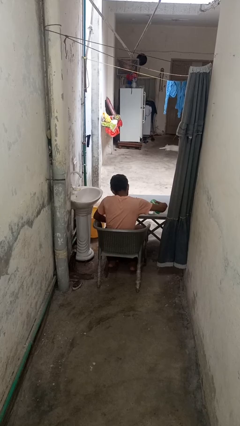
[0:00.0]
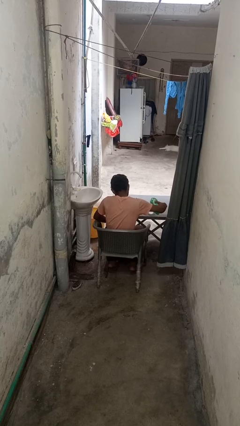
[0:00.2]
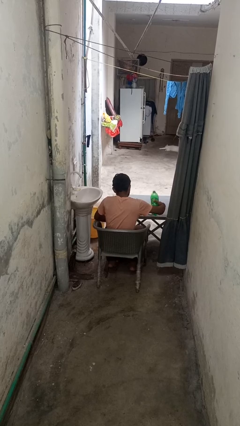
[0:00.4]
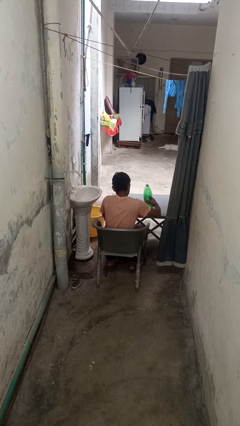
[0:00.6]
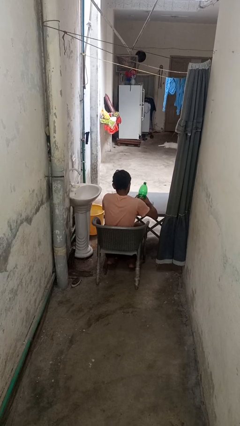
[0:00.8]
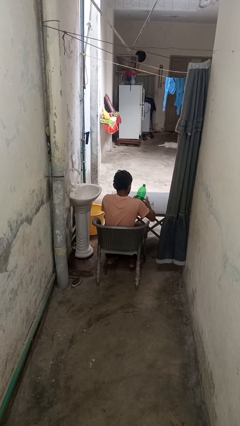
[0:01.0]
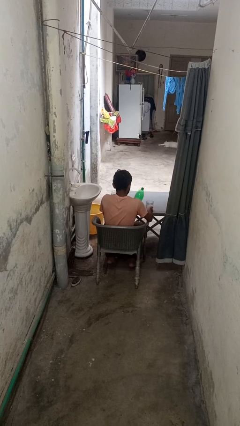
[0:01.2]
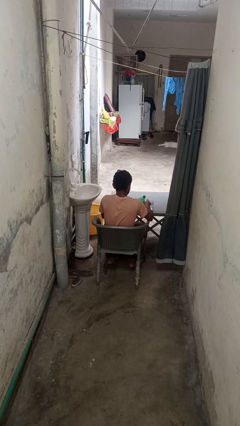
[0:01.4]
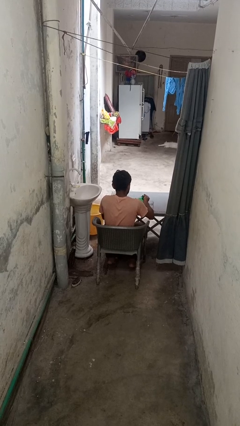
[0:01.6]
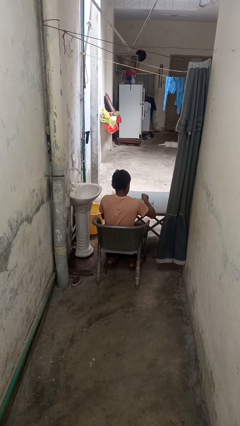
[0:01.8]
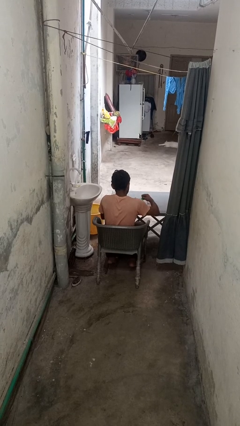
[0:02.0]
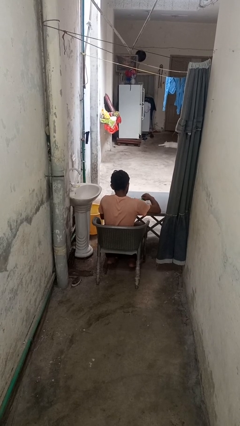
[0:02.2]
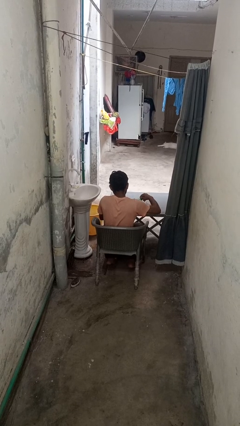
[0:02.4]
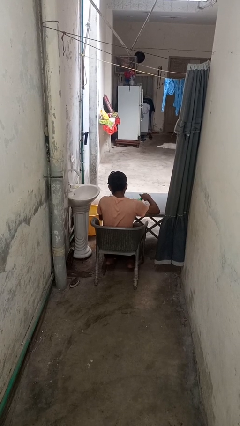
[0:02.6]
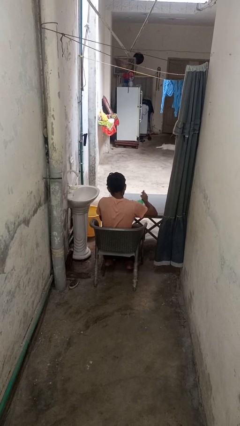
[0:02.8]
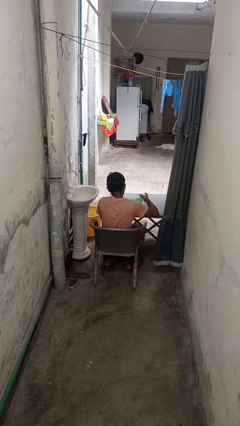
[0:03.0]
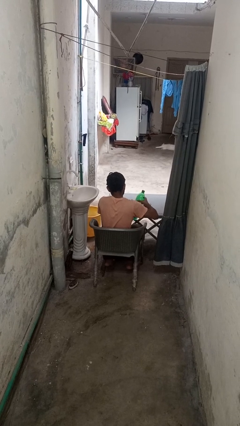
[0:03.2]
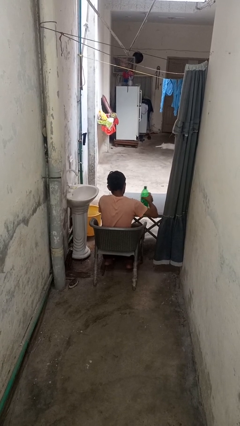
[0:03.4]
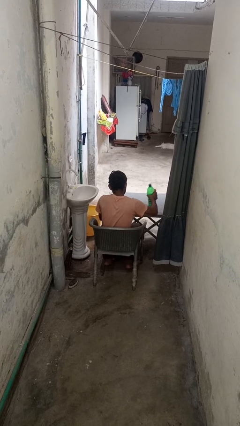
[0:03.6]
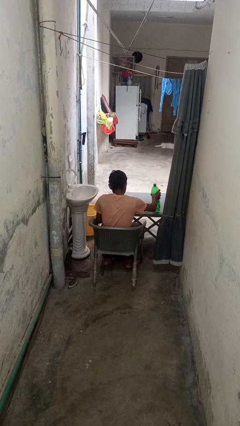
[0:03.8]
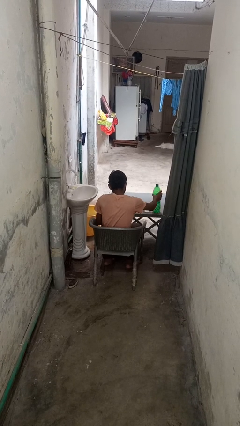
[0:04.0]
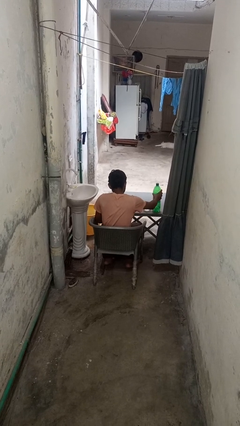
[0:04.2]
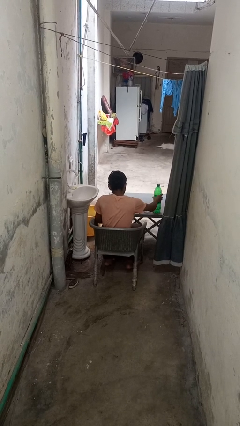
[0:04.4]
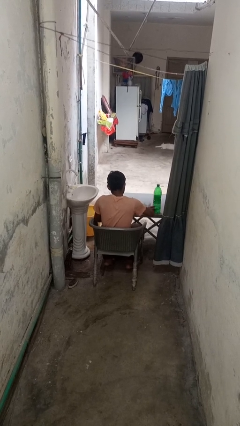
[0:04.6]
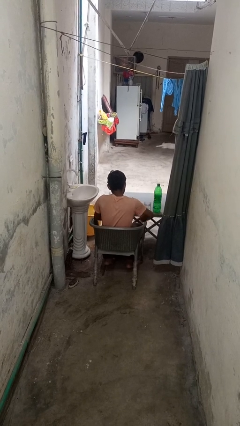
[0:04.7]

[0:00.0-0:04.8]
person screws lid to bottle

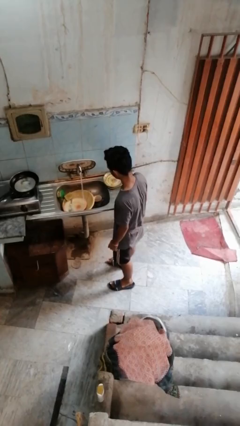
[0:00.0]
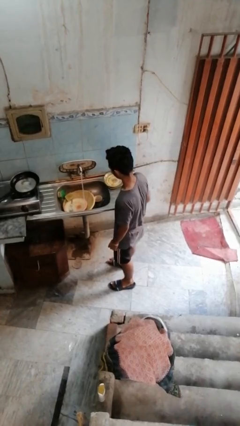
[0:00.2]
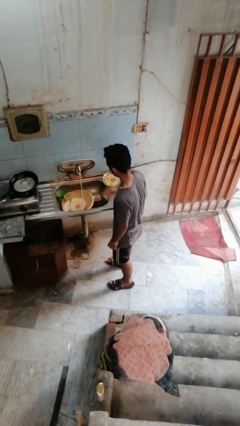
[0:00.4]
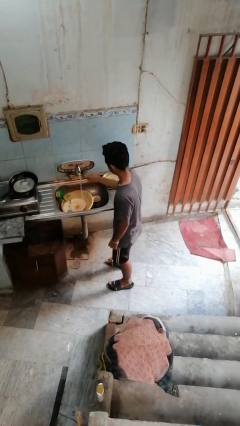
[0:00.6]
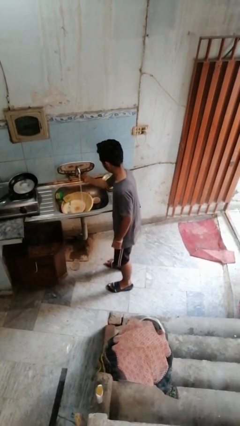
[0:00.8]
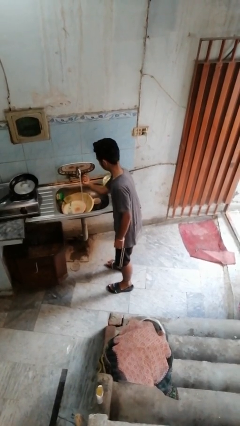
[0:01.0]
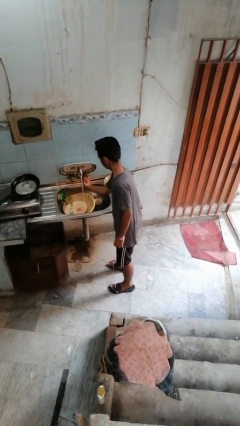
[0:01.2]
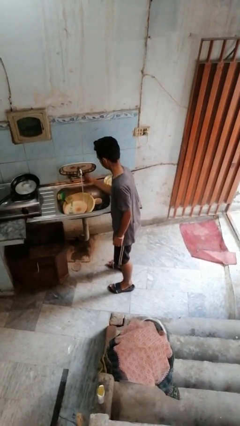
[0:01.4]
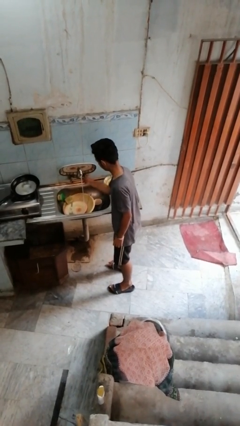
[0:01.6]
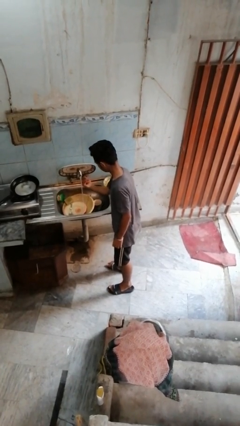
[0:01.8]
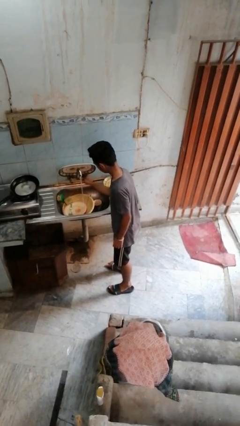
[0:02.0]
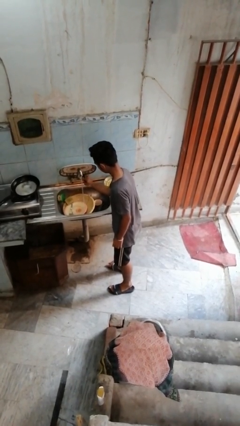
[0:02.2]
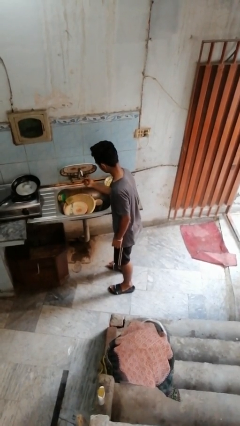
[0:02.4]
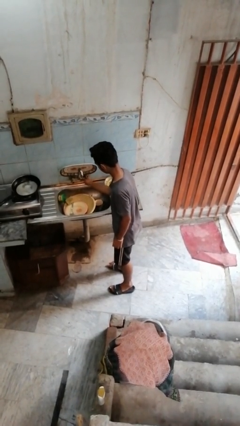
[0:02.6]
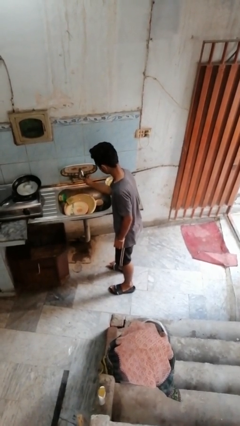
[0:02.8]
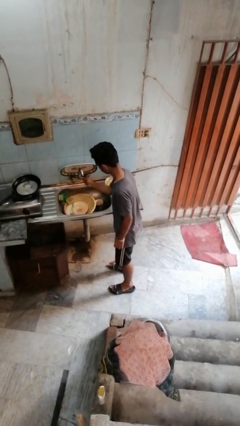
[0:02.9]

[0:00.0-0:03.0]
person turns off faucet

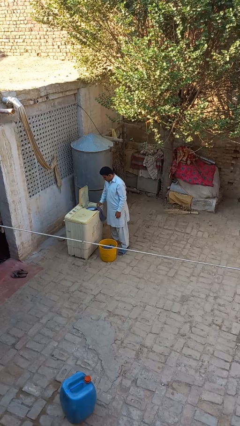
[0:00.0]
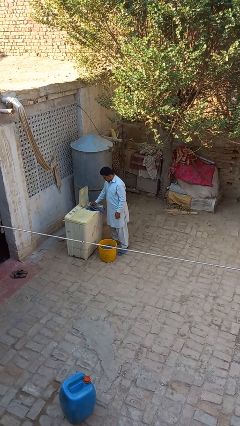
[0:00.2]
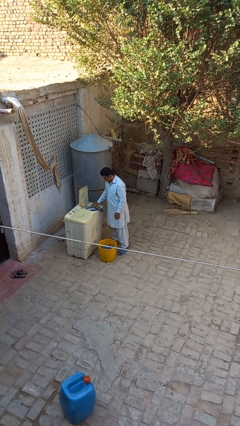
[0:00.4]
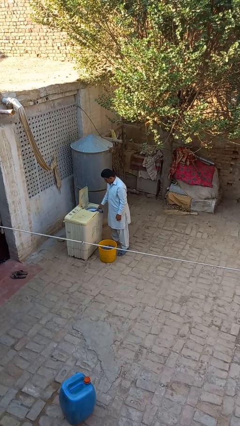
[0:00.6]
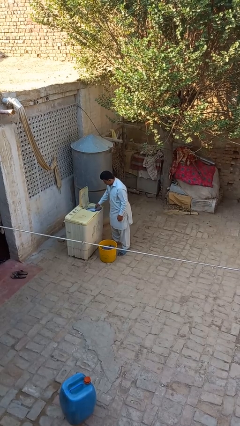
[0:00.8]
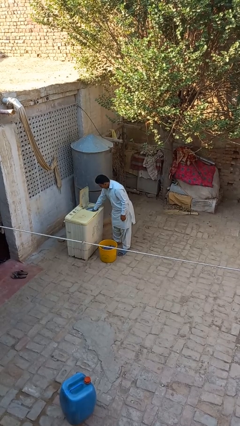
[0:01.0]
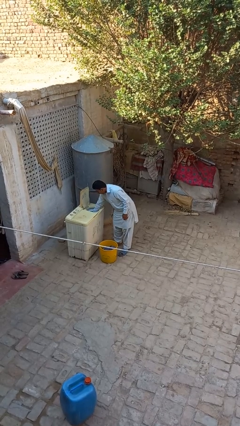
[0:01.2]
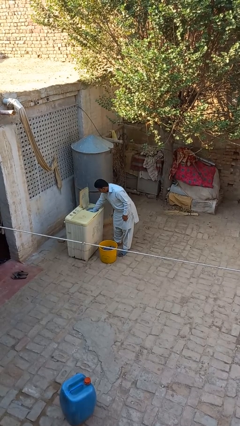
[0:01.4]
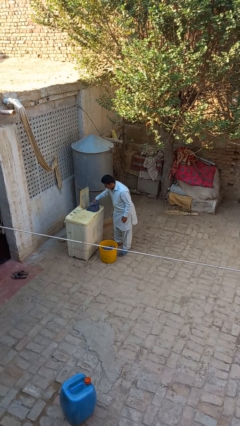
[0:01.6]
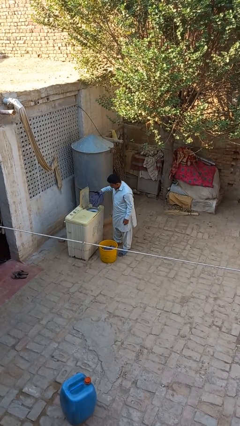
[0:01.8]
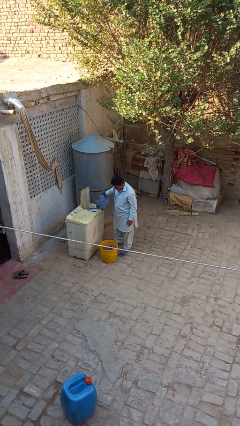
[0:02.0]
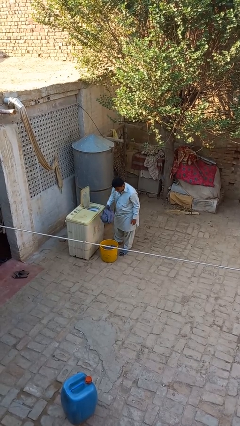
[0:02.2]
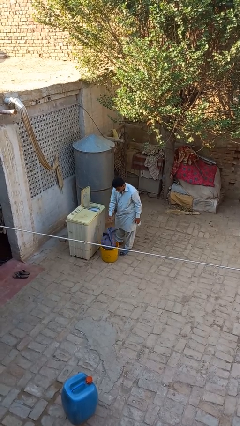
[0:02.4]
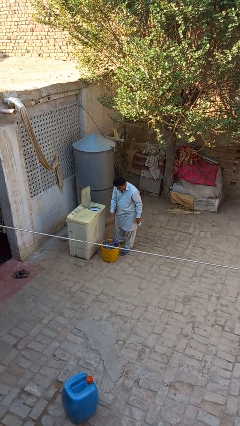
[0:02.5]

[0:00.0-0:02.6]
person unloads dryer

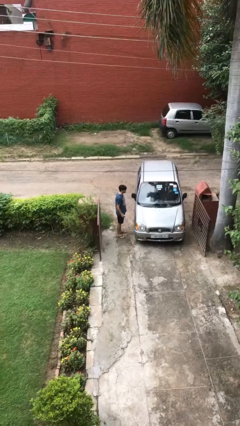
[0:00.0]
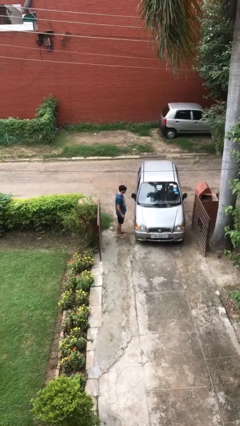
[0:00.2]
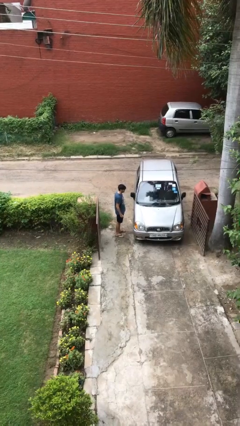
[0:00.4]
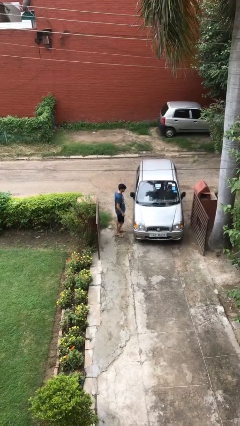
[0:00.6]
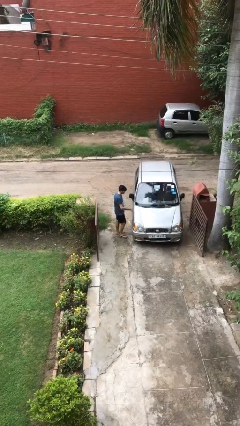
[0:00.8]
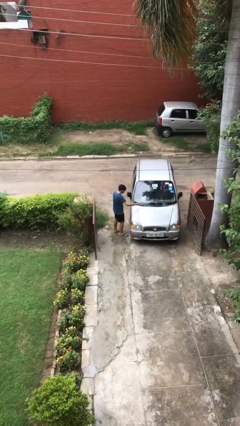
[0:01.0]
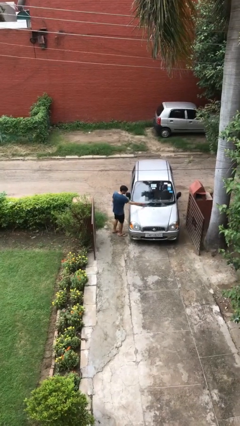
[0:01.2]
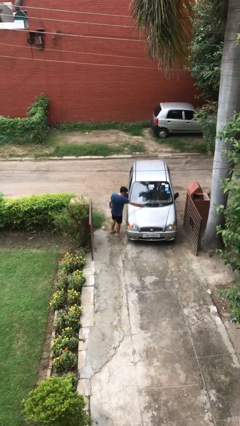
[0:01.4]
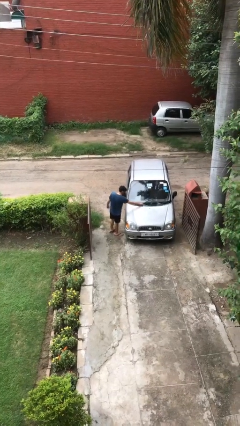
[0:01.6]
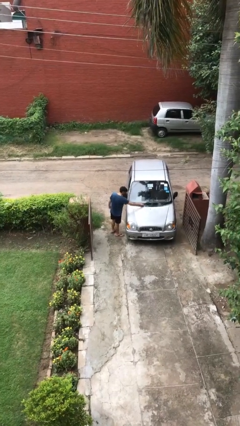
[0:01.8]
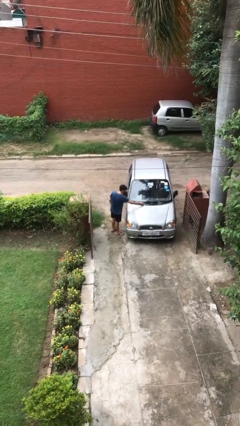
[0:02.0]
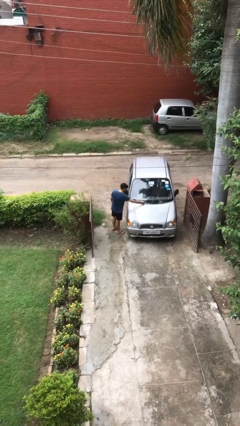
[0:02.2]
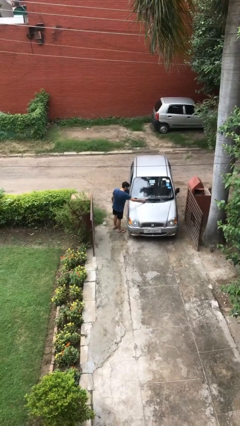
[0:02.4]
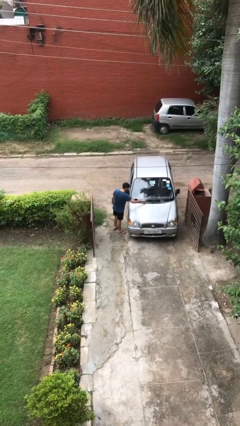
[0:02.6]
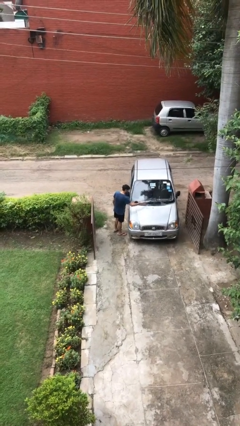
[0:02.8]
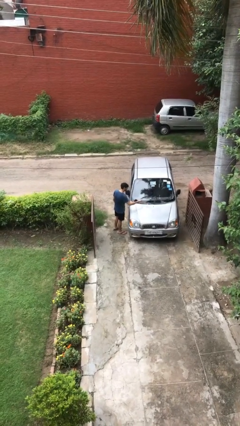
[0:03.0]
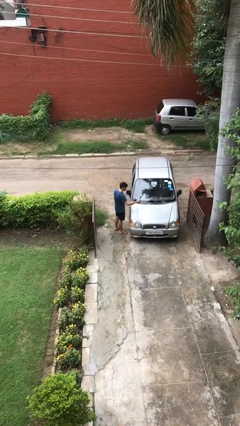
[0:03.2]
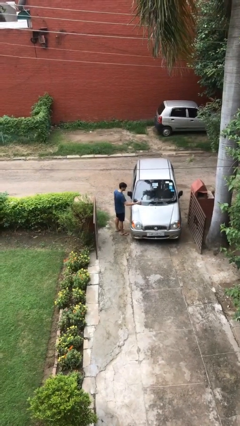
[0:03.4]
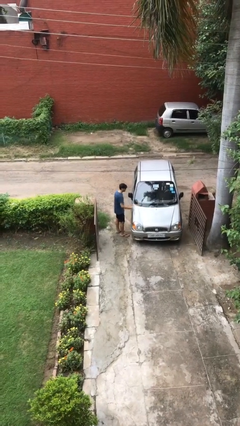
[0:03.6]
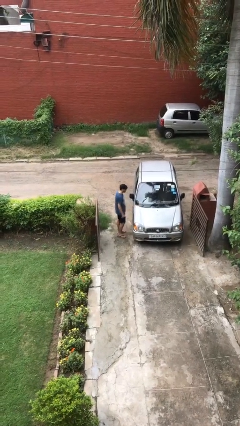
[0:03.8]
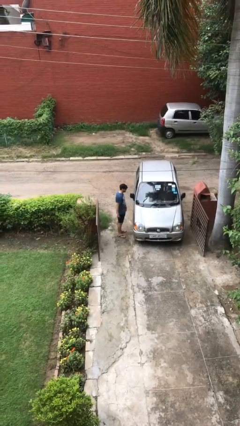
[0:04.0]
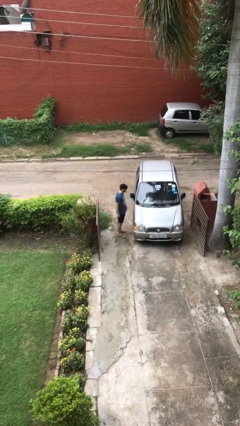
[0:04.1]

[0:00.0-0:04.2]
person flips up car wipers

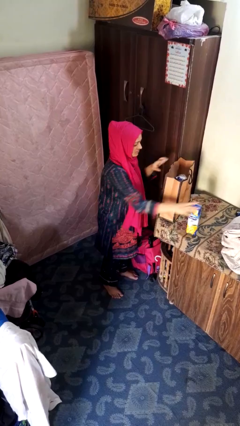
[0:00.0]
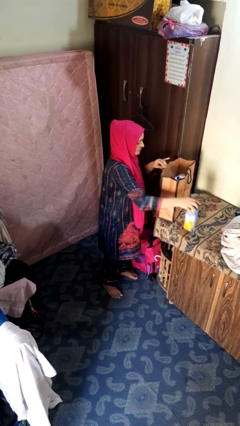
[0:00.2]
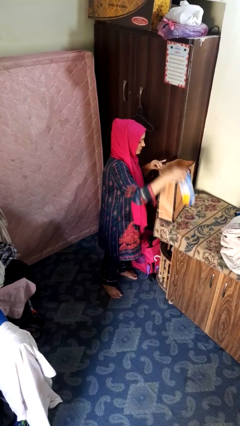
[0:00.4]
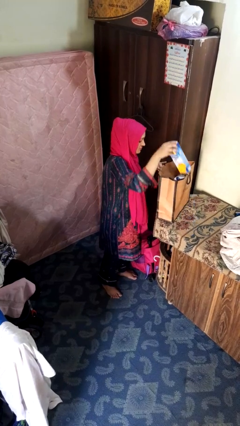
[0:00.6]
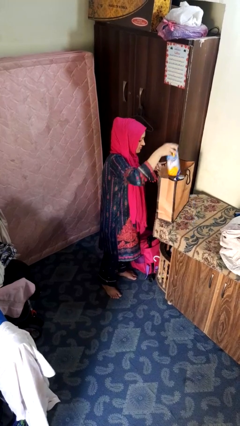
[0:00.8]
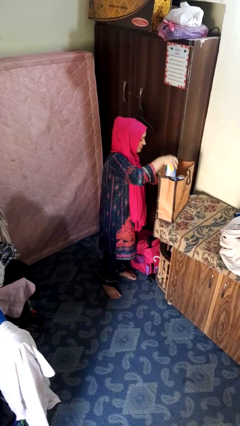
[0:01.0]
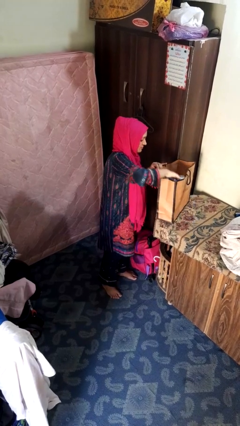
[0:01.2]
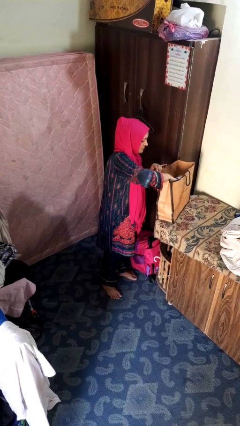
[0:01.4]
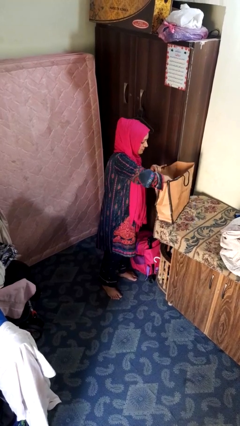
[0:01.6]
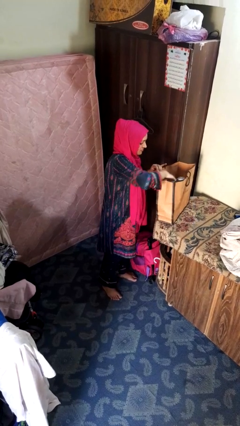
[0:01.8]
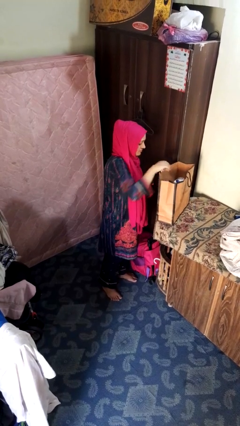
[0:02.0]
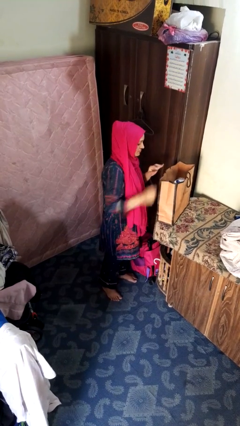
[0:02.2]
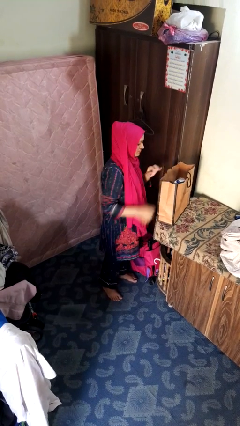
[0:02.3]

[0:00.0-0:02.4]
person puts object into bag

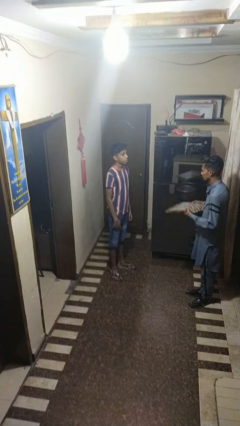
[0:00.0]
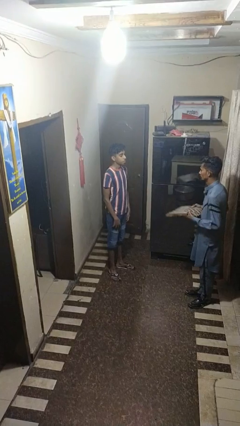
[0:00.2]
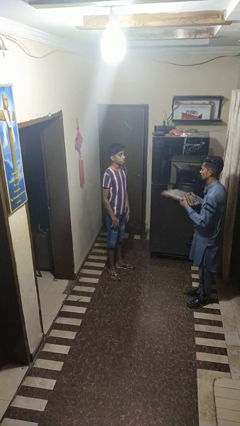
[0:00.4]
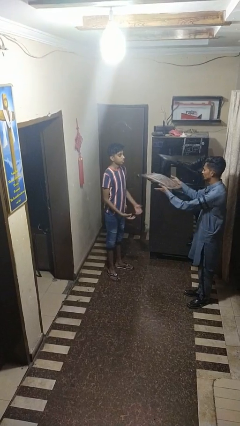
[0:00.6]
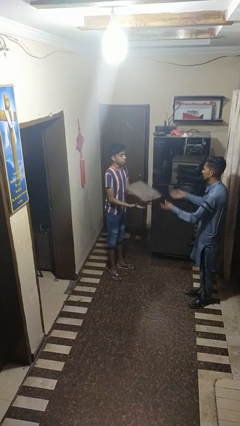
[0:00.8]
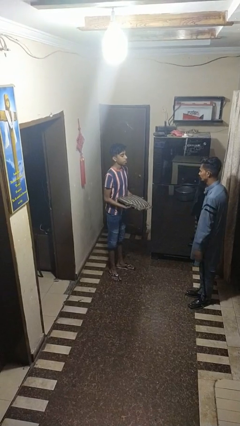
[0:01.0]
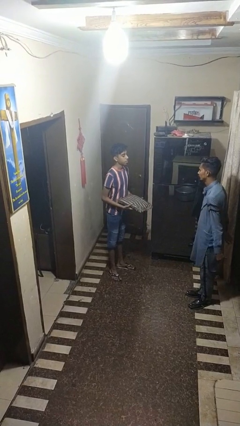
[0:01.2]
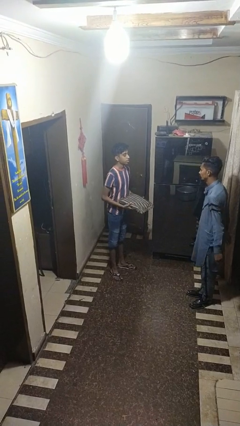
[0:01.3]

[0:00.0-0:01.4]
person catches object from person
